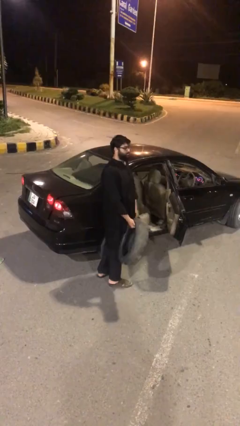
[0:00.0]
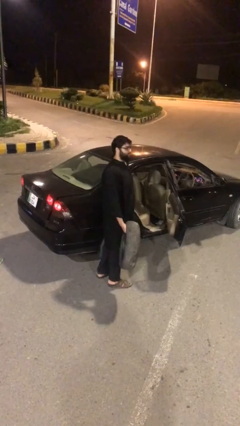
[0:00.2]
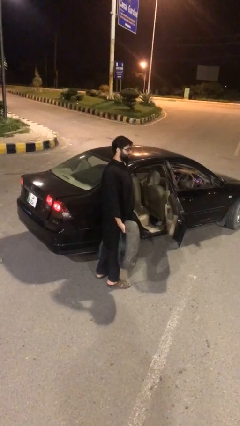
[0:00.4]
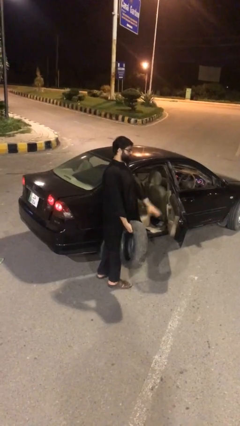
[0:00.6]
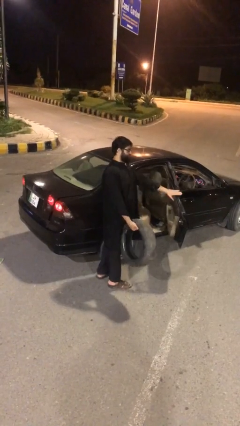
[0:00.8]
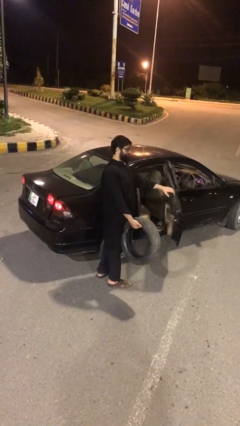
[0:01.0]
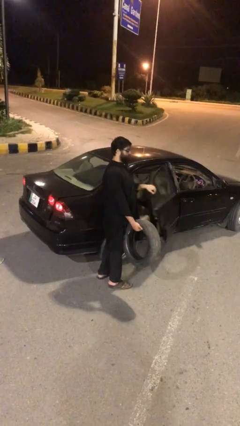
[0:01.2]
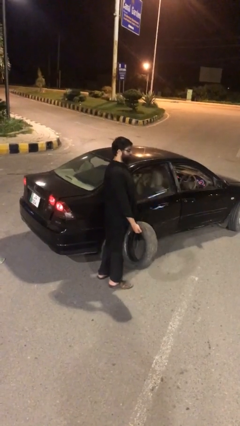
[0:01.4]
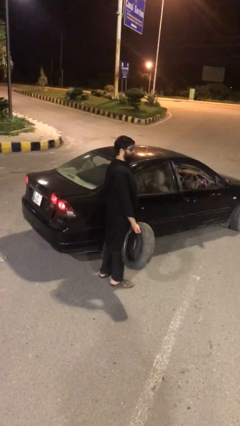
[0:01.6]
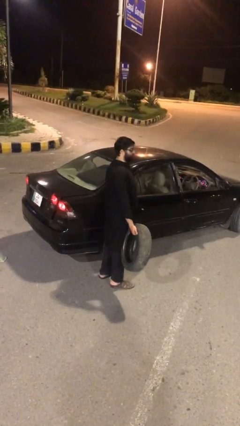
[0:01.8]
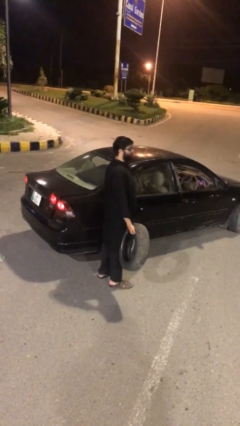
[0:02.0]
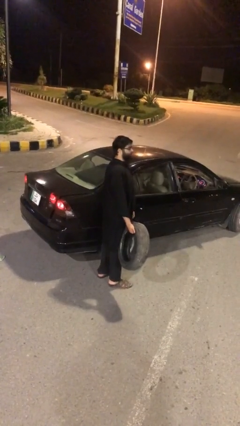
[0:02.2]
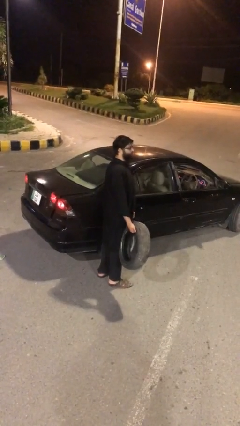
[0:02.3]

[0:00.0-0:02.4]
person closes car door

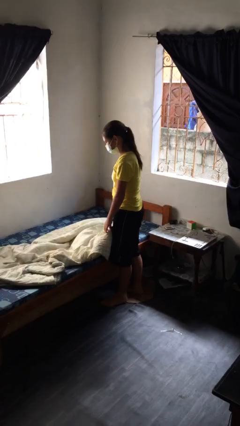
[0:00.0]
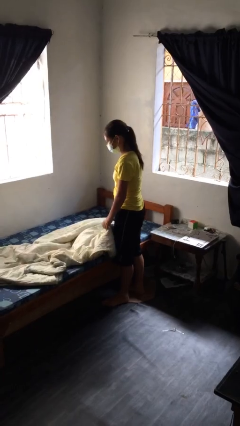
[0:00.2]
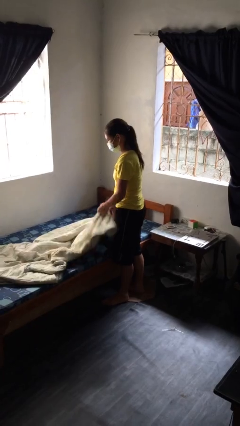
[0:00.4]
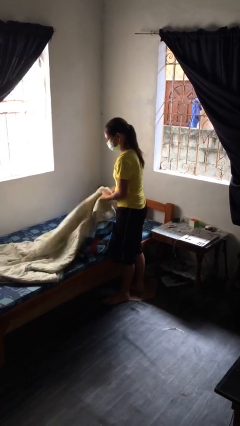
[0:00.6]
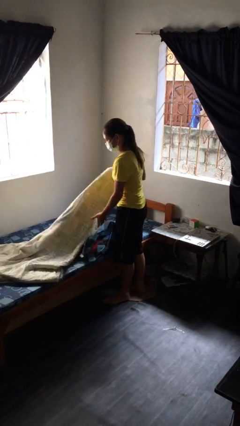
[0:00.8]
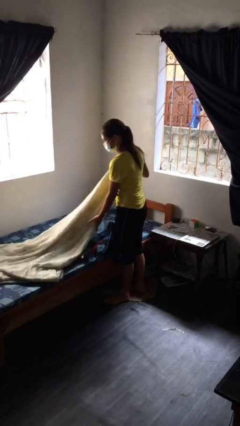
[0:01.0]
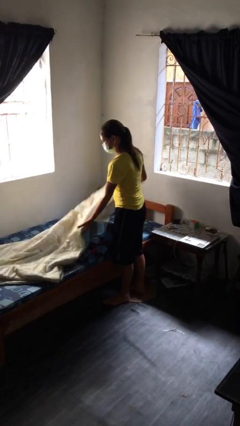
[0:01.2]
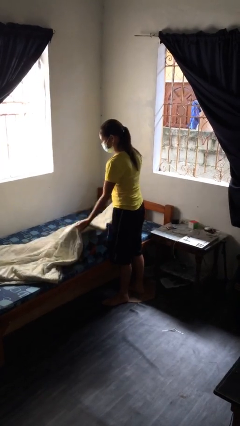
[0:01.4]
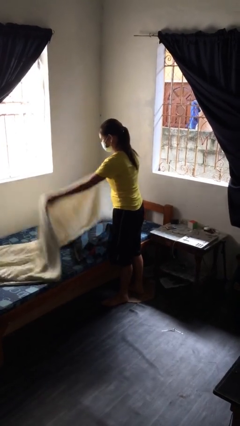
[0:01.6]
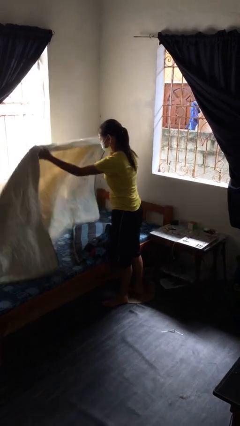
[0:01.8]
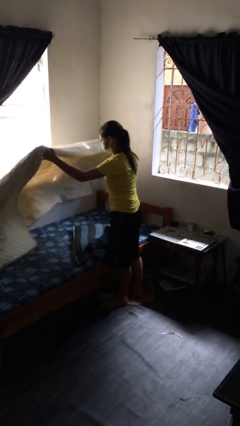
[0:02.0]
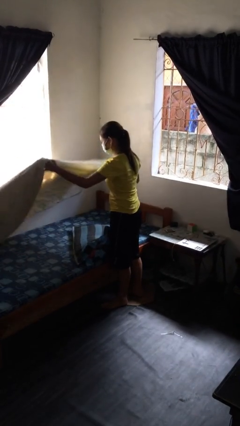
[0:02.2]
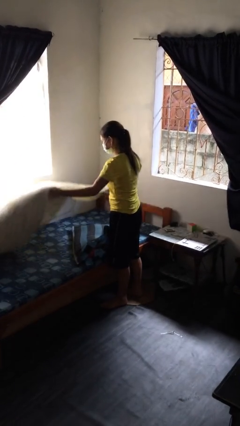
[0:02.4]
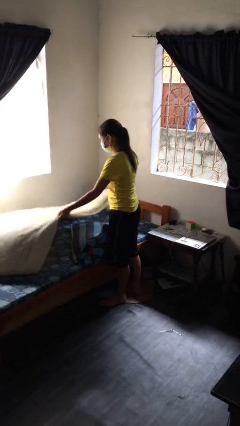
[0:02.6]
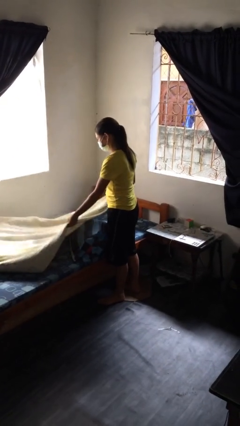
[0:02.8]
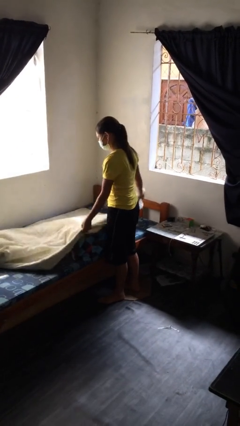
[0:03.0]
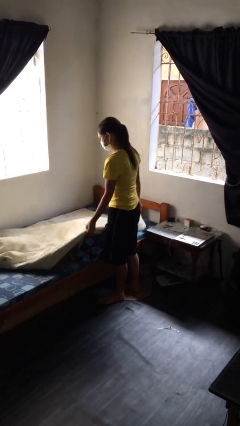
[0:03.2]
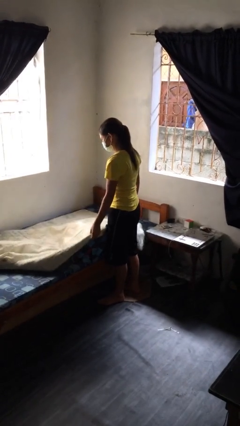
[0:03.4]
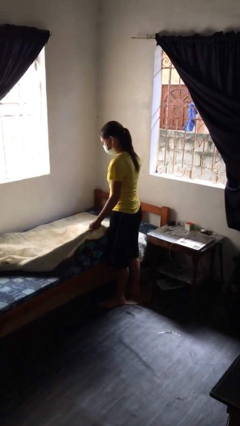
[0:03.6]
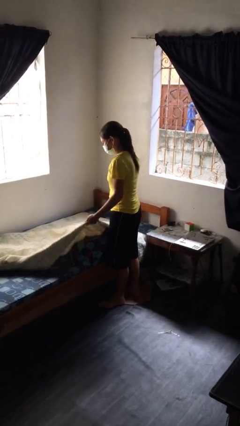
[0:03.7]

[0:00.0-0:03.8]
person makes bed

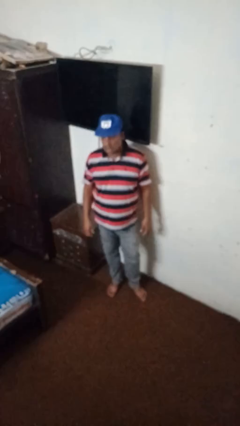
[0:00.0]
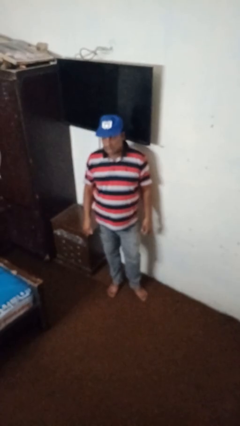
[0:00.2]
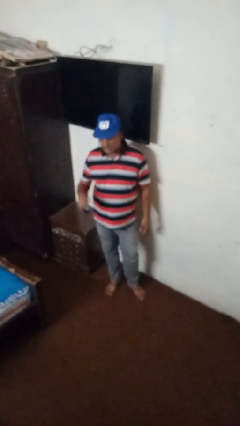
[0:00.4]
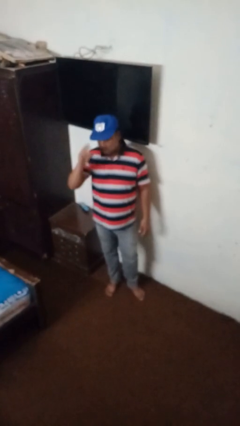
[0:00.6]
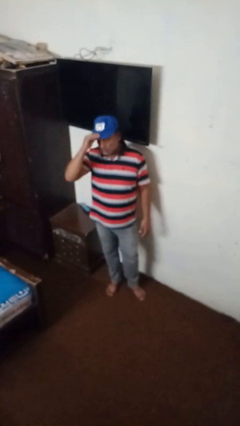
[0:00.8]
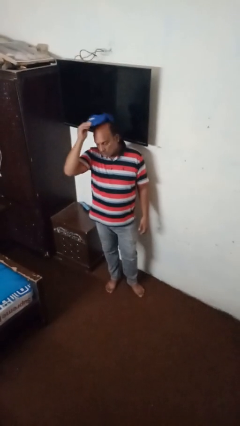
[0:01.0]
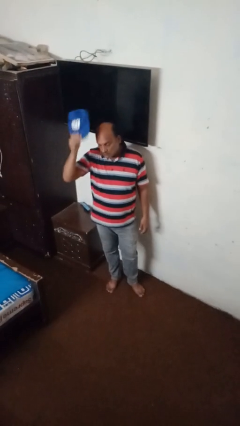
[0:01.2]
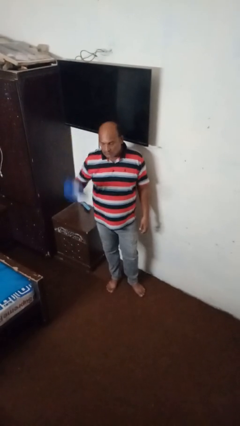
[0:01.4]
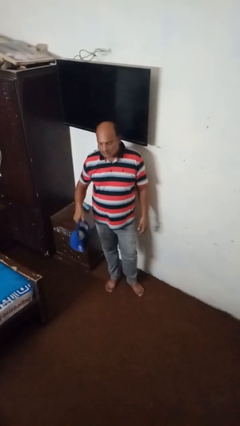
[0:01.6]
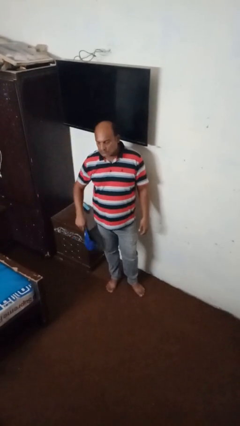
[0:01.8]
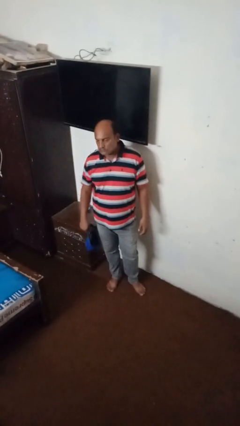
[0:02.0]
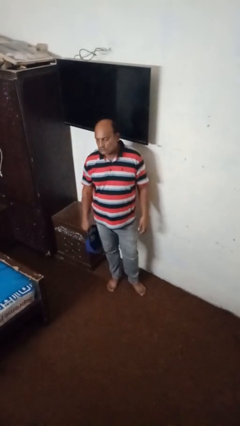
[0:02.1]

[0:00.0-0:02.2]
person takes off hat

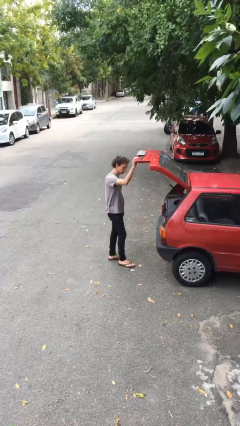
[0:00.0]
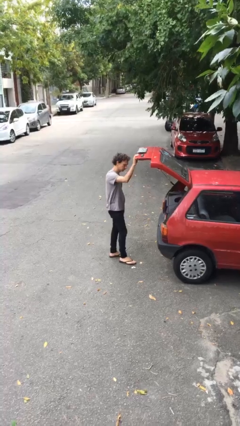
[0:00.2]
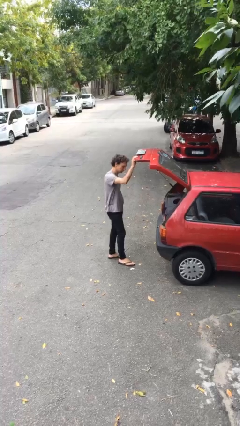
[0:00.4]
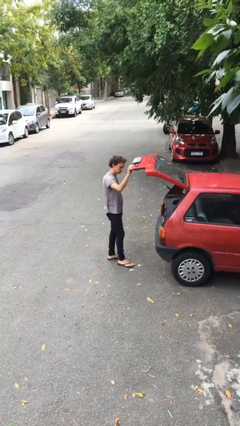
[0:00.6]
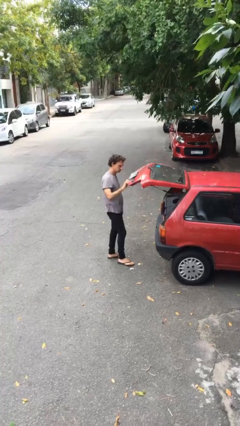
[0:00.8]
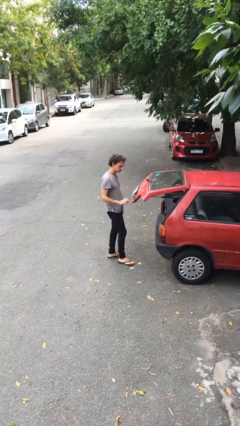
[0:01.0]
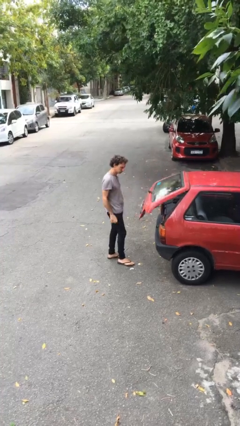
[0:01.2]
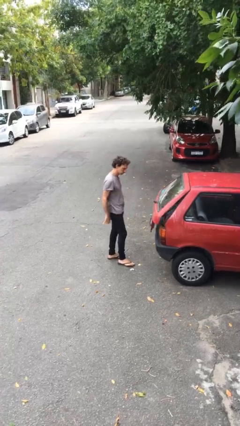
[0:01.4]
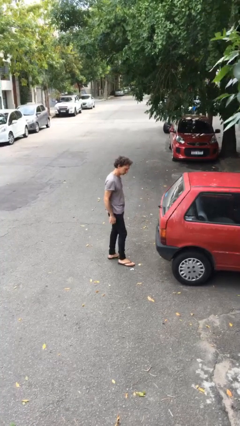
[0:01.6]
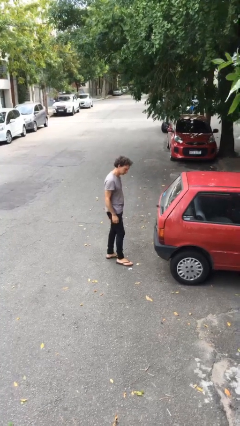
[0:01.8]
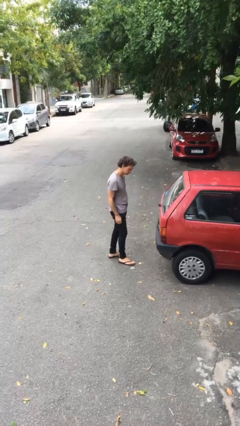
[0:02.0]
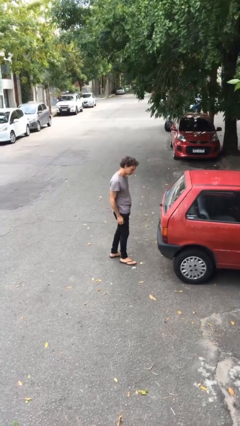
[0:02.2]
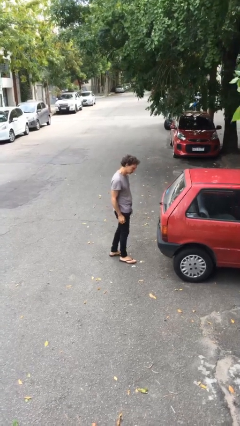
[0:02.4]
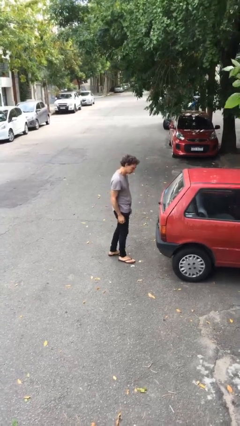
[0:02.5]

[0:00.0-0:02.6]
person closes car trunk

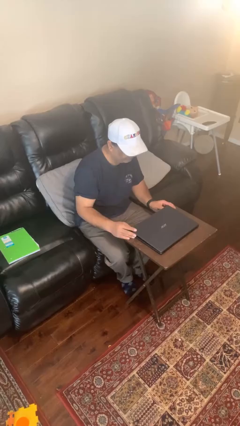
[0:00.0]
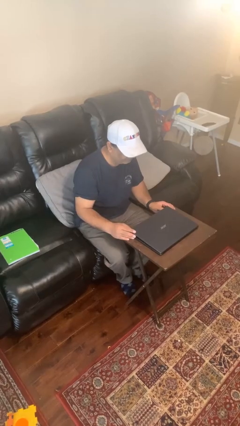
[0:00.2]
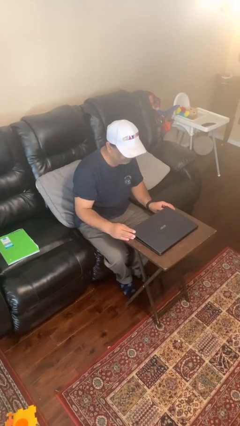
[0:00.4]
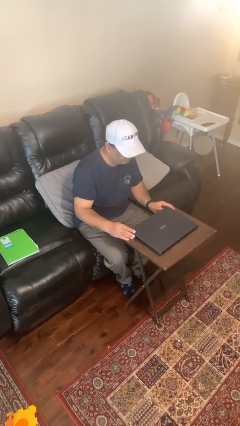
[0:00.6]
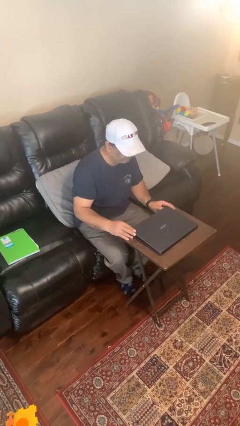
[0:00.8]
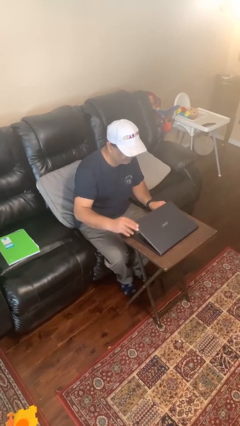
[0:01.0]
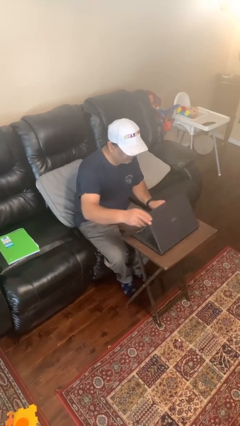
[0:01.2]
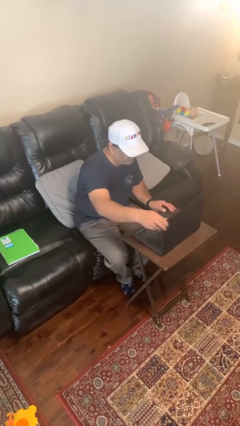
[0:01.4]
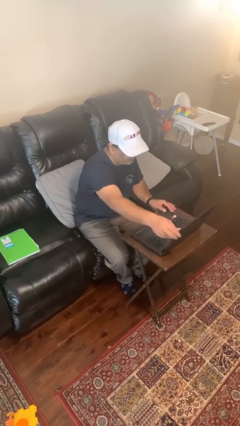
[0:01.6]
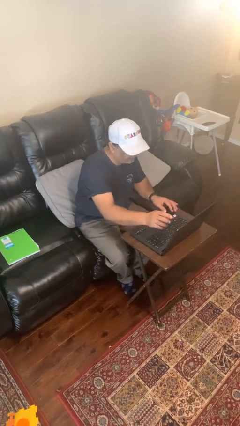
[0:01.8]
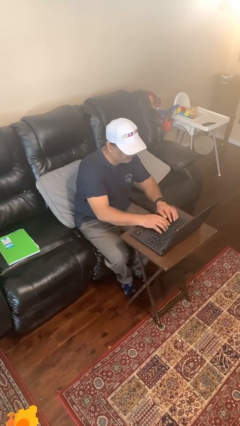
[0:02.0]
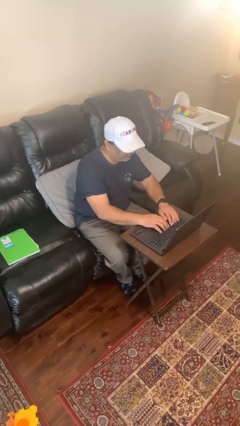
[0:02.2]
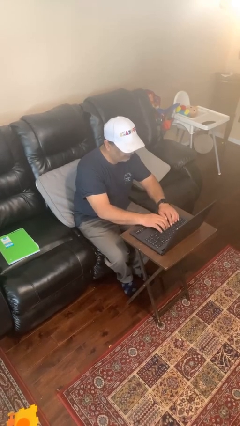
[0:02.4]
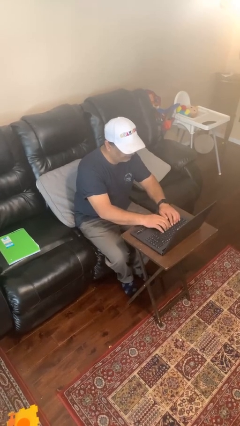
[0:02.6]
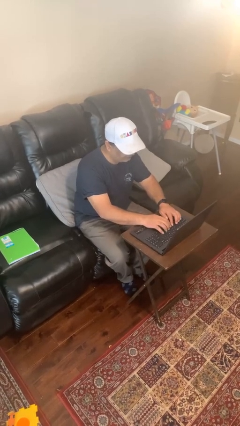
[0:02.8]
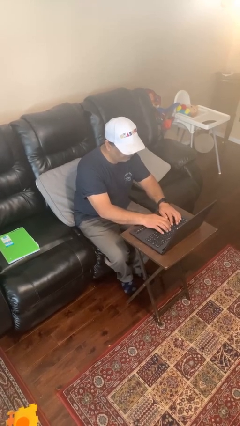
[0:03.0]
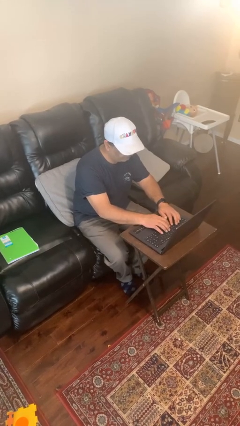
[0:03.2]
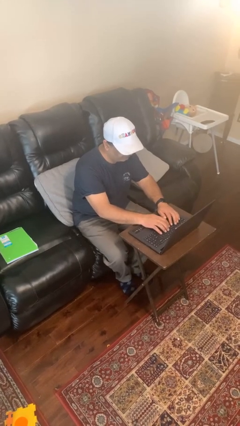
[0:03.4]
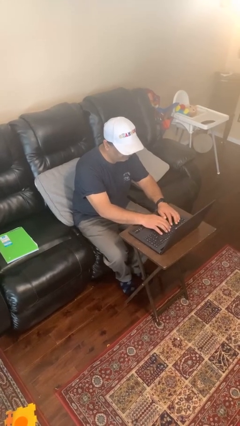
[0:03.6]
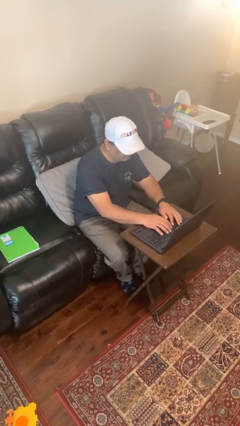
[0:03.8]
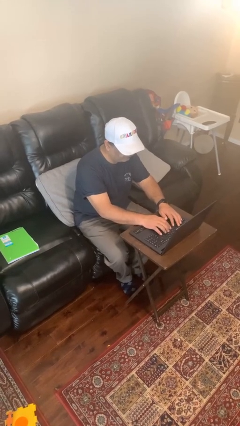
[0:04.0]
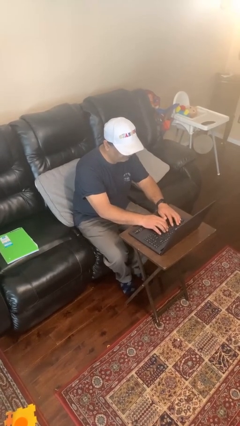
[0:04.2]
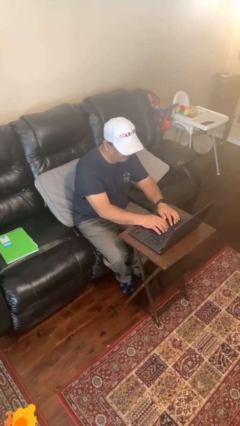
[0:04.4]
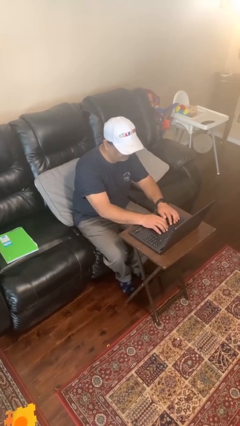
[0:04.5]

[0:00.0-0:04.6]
person interacts with laptop

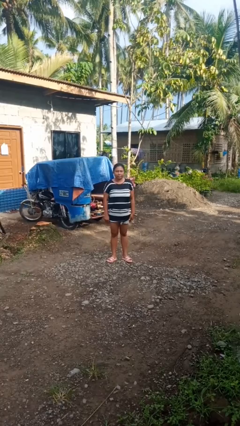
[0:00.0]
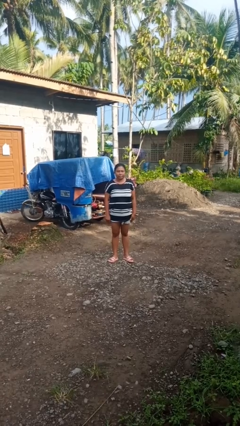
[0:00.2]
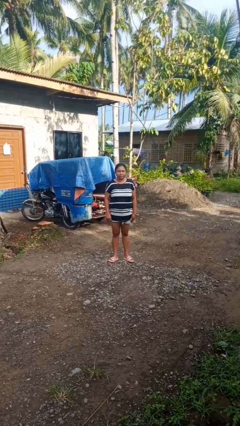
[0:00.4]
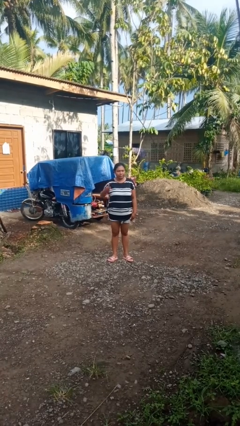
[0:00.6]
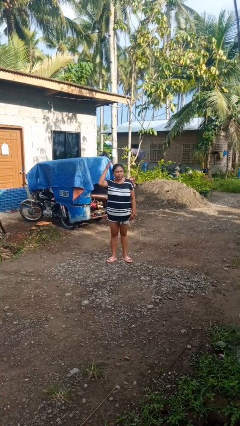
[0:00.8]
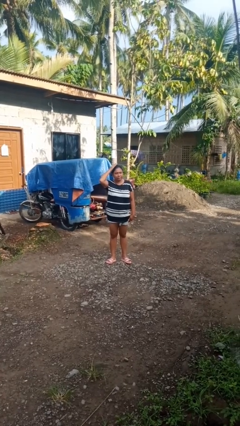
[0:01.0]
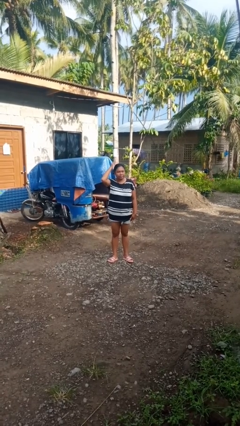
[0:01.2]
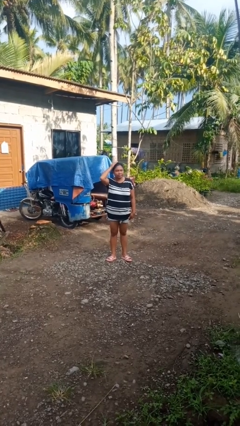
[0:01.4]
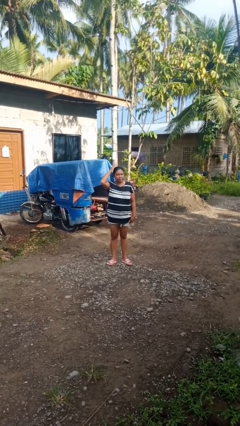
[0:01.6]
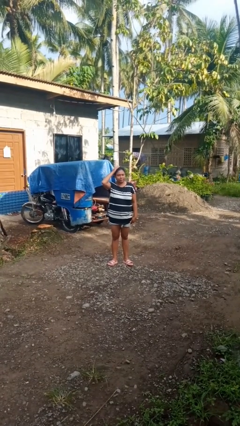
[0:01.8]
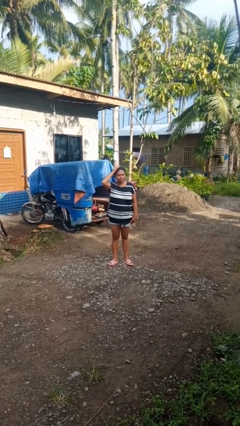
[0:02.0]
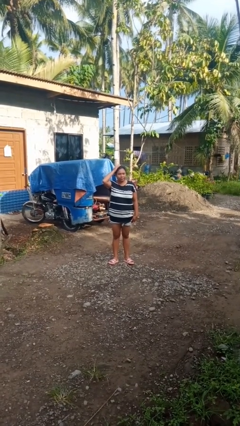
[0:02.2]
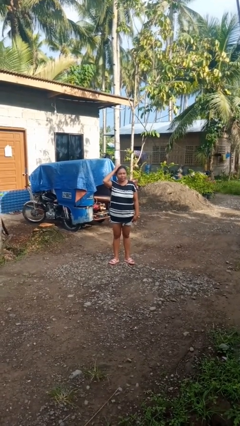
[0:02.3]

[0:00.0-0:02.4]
person pats head
